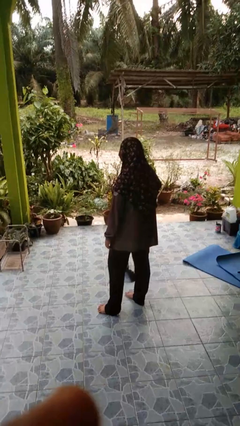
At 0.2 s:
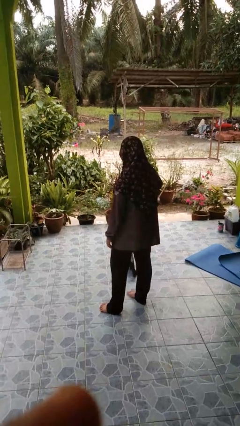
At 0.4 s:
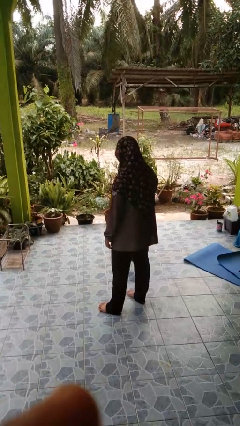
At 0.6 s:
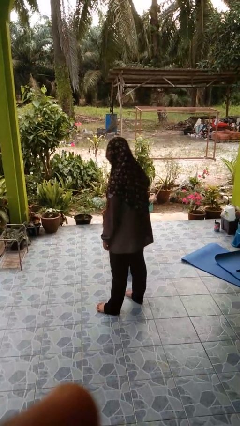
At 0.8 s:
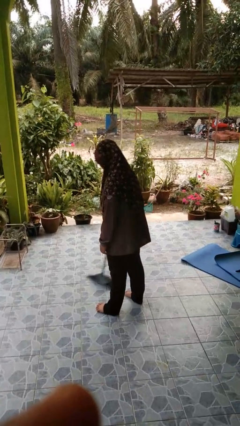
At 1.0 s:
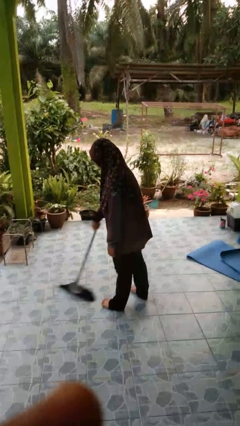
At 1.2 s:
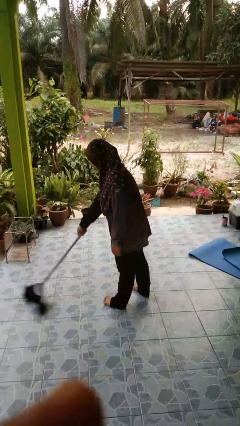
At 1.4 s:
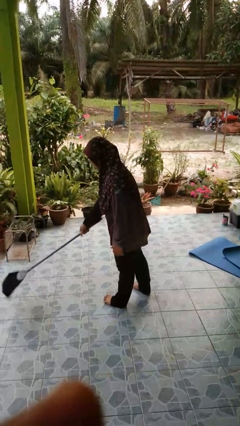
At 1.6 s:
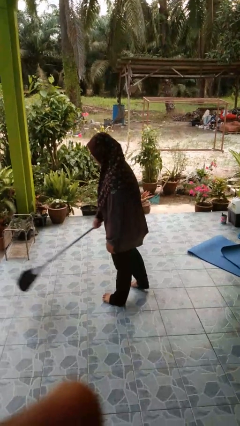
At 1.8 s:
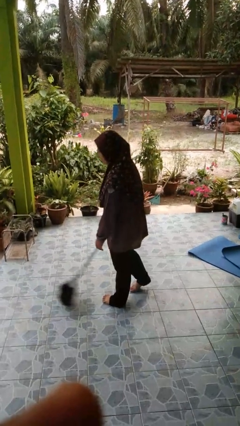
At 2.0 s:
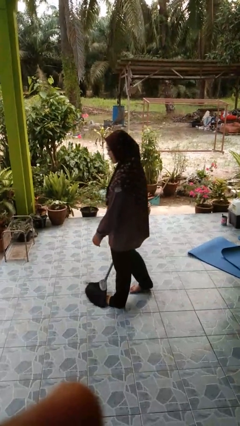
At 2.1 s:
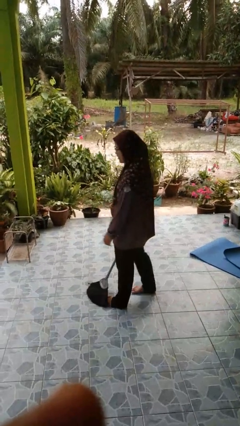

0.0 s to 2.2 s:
person sweeps floor

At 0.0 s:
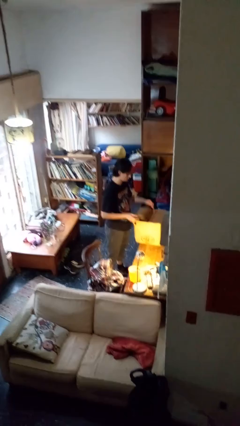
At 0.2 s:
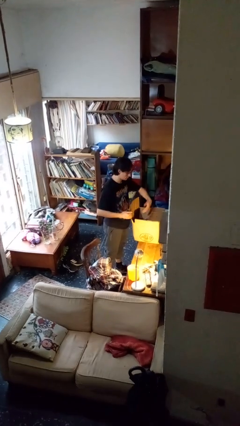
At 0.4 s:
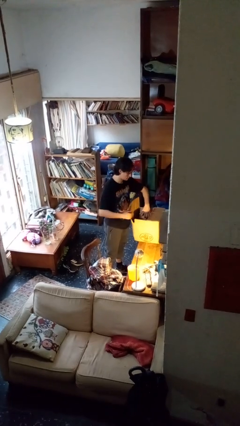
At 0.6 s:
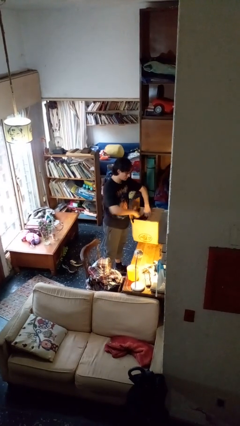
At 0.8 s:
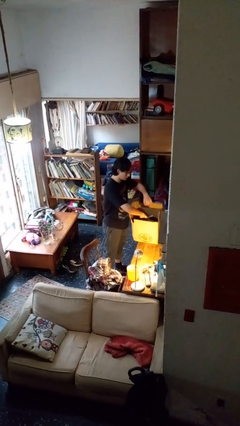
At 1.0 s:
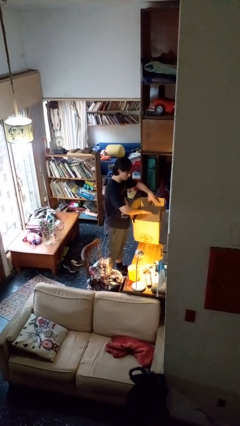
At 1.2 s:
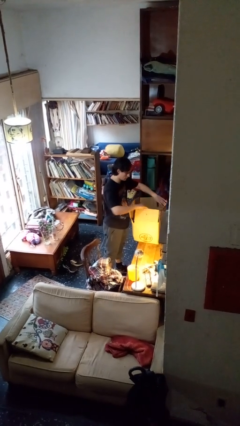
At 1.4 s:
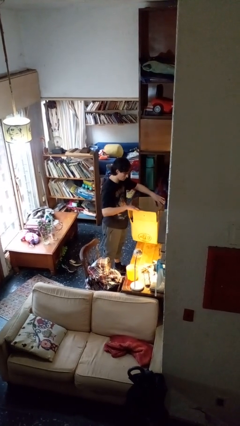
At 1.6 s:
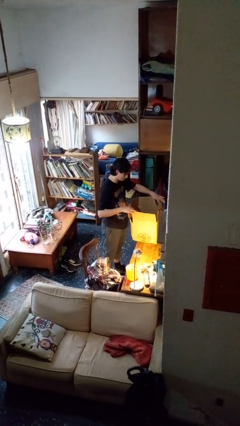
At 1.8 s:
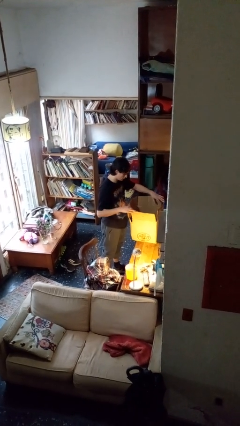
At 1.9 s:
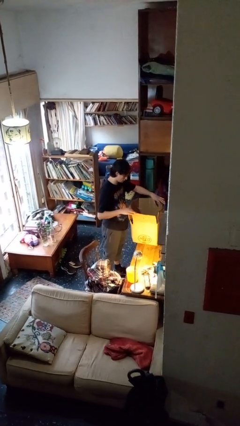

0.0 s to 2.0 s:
person opens box

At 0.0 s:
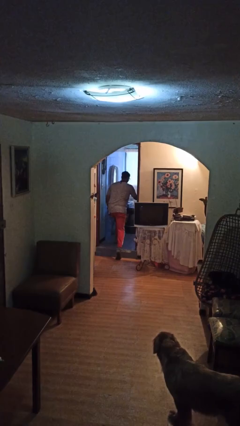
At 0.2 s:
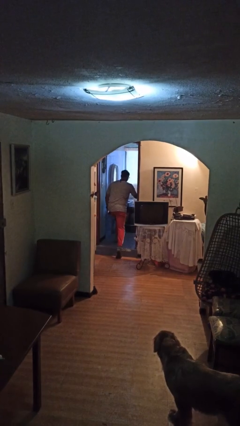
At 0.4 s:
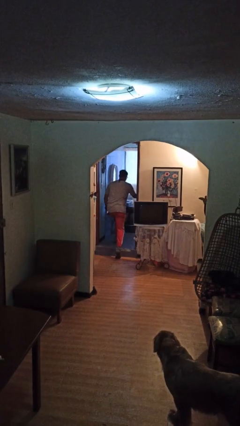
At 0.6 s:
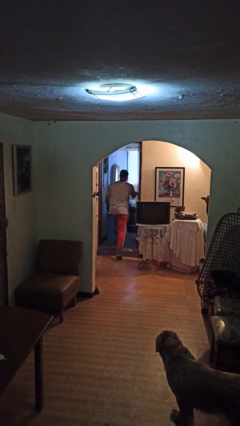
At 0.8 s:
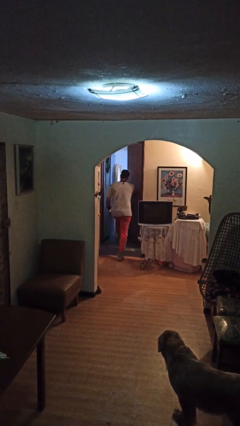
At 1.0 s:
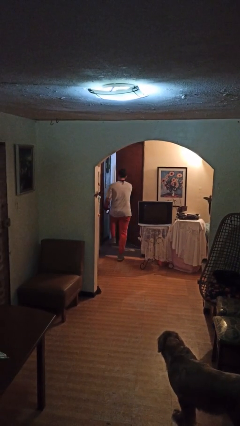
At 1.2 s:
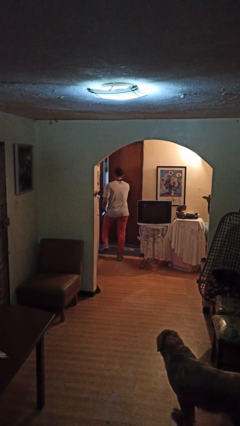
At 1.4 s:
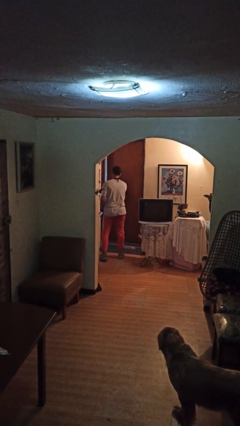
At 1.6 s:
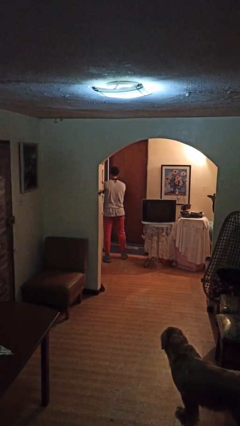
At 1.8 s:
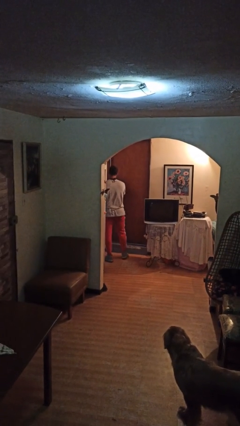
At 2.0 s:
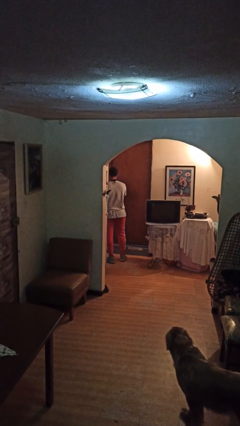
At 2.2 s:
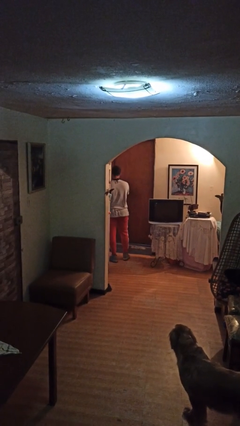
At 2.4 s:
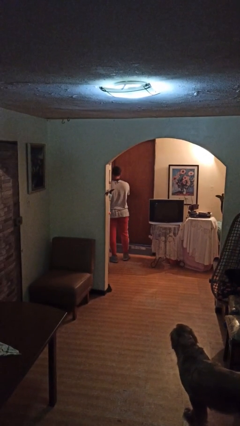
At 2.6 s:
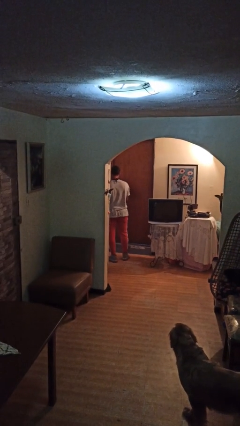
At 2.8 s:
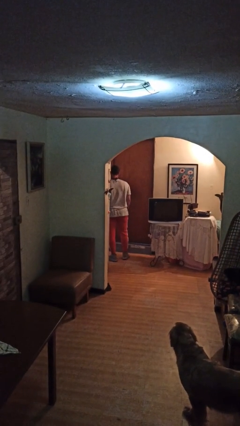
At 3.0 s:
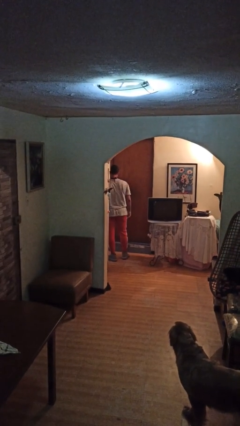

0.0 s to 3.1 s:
person closes facility door

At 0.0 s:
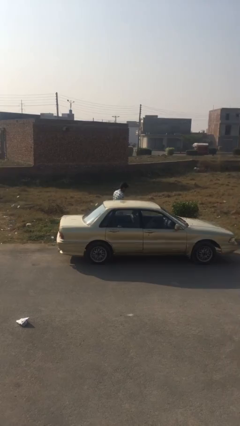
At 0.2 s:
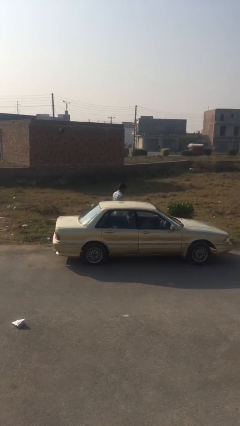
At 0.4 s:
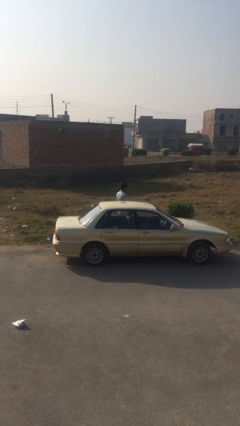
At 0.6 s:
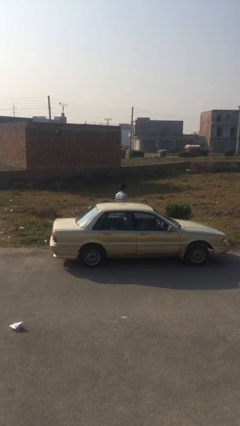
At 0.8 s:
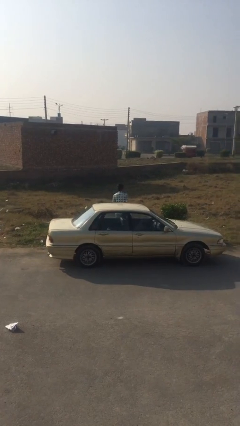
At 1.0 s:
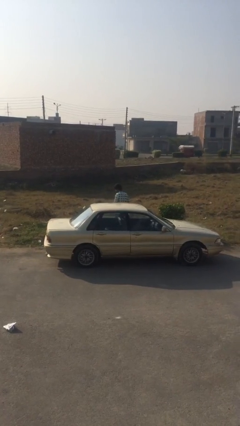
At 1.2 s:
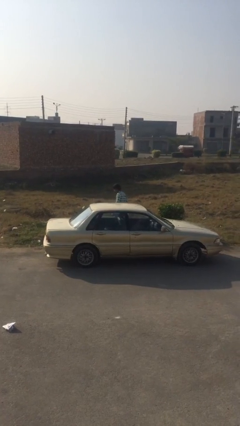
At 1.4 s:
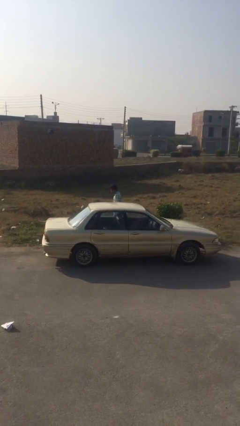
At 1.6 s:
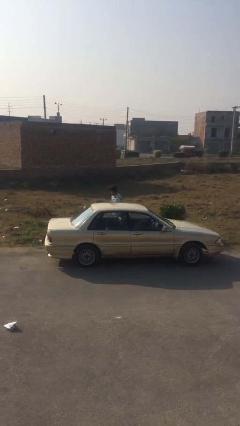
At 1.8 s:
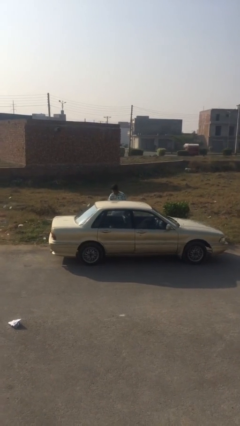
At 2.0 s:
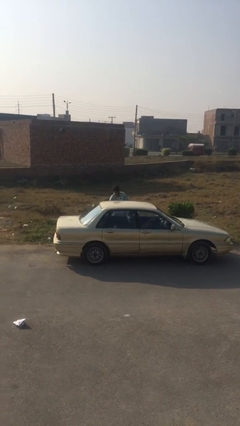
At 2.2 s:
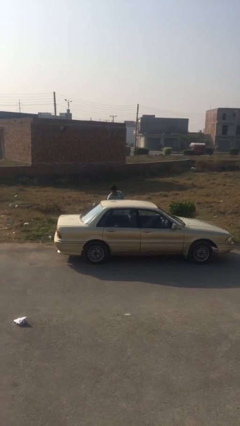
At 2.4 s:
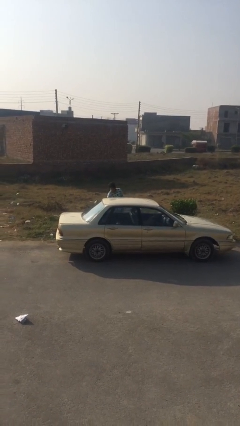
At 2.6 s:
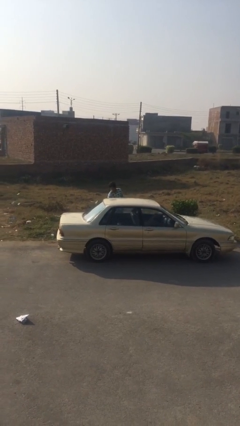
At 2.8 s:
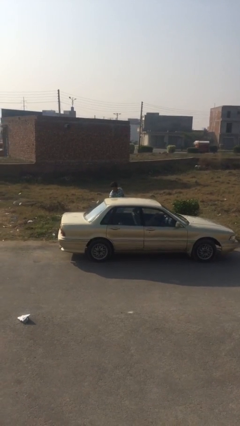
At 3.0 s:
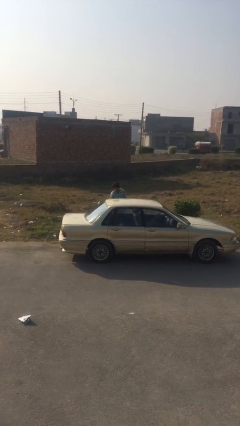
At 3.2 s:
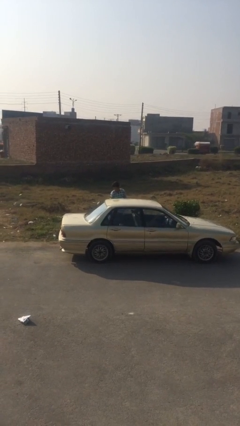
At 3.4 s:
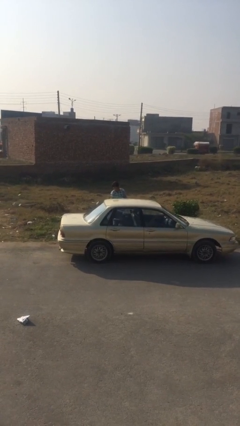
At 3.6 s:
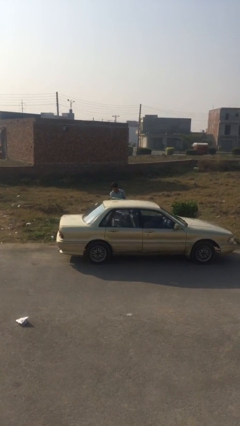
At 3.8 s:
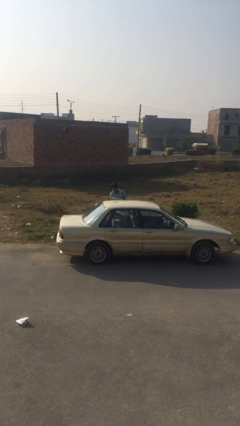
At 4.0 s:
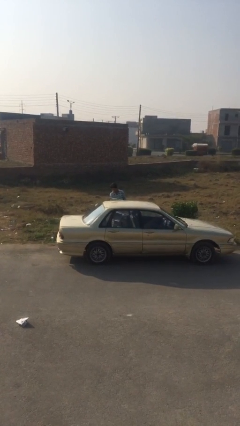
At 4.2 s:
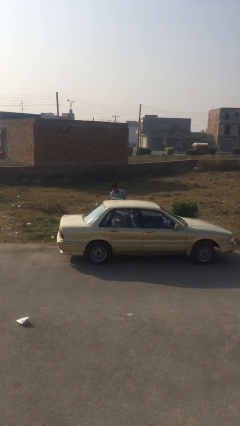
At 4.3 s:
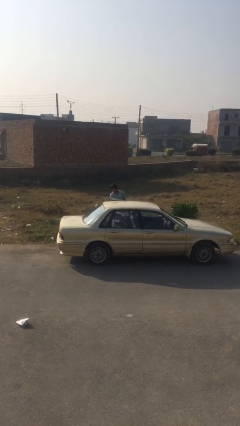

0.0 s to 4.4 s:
person opens car door

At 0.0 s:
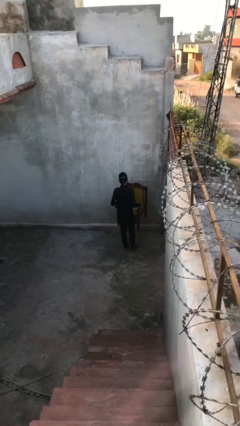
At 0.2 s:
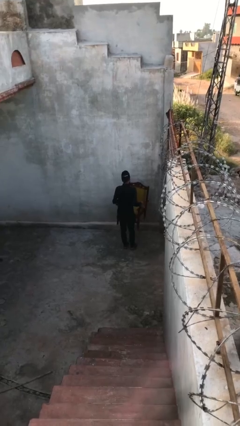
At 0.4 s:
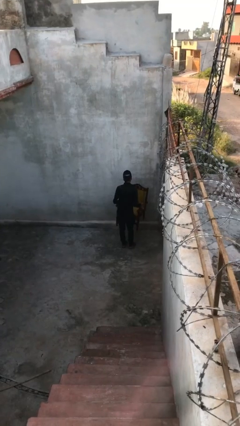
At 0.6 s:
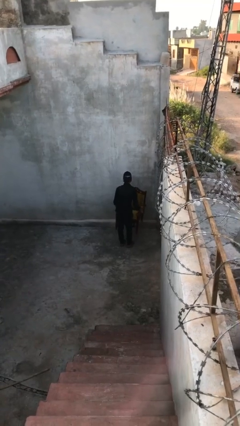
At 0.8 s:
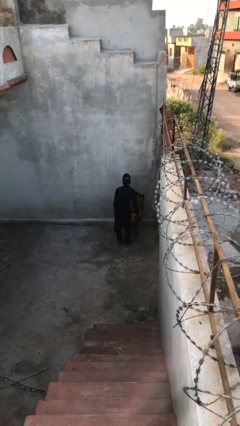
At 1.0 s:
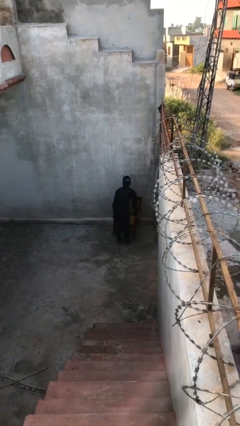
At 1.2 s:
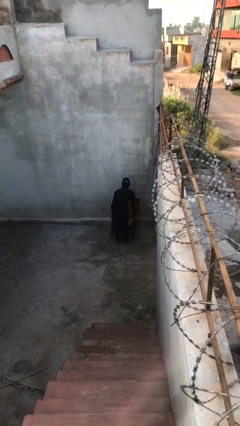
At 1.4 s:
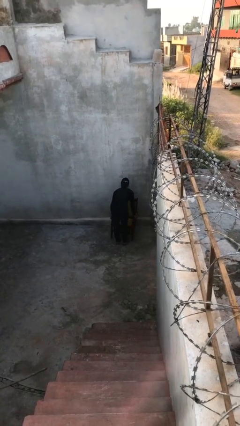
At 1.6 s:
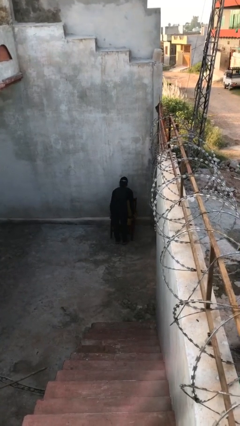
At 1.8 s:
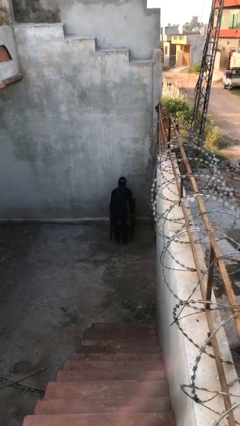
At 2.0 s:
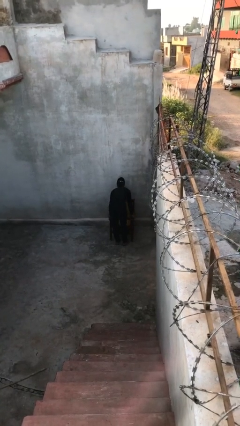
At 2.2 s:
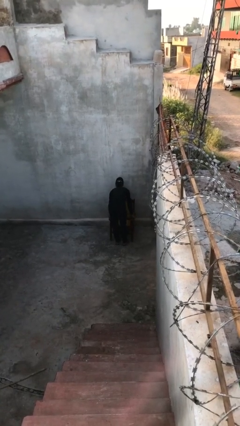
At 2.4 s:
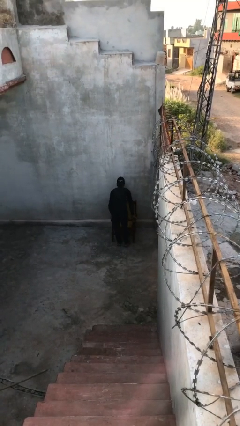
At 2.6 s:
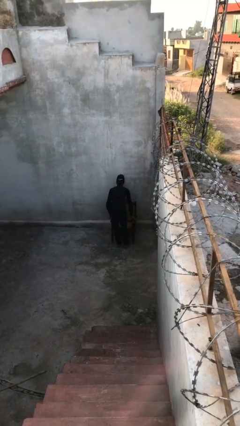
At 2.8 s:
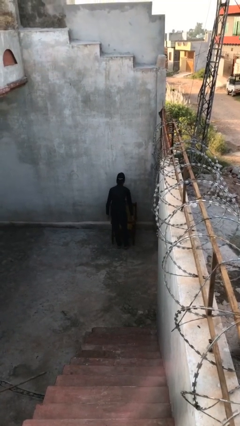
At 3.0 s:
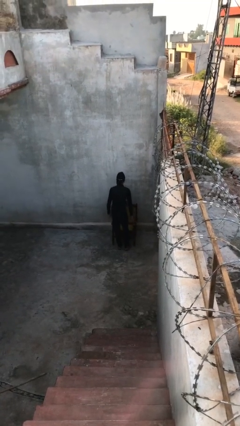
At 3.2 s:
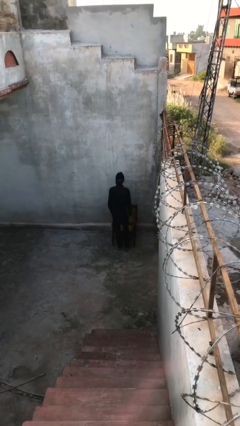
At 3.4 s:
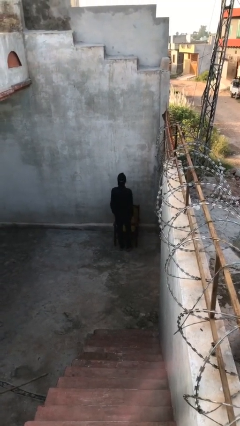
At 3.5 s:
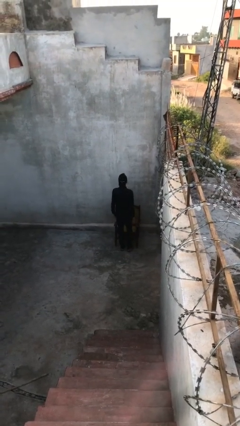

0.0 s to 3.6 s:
person puts down object on floor

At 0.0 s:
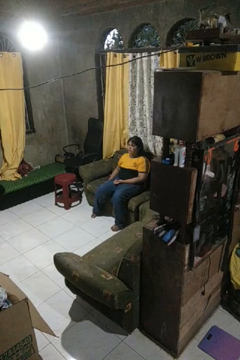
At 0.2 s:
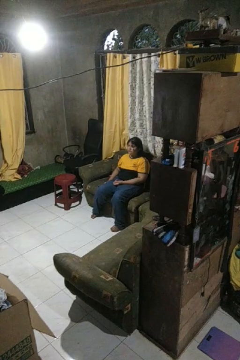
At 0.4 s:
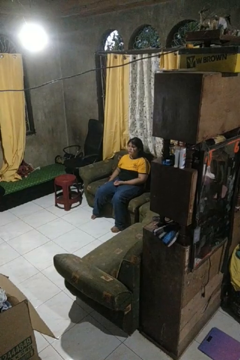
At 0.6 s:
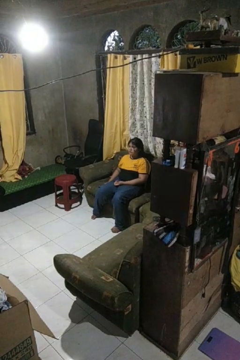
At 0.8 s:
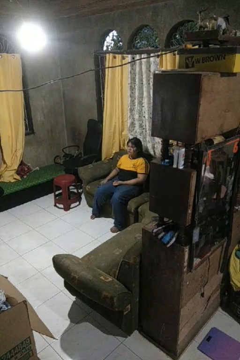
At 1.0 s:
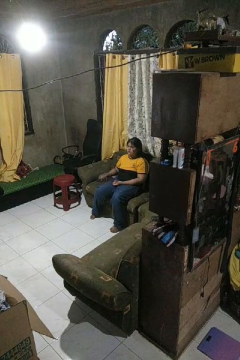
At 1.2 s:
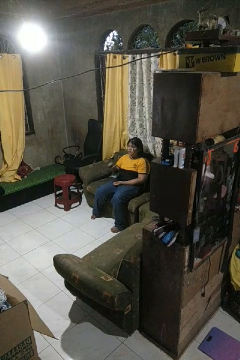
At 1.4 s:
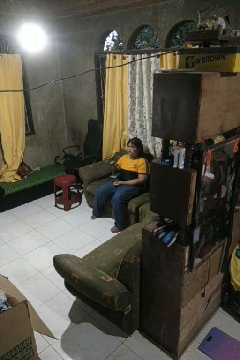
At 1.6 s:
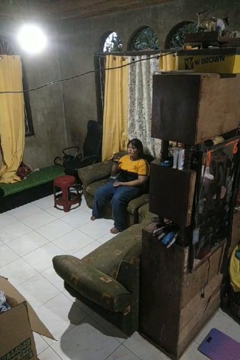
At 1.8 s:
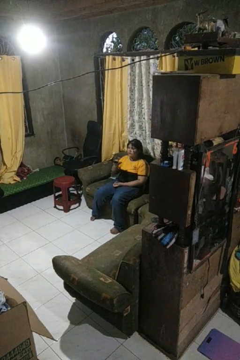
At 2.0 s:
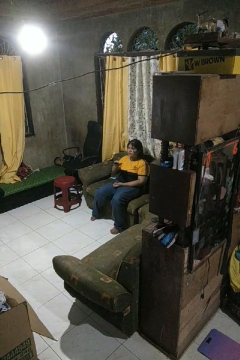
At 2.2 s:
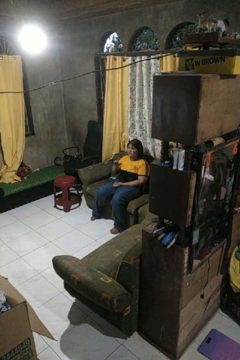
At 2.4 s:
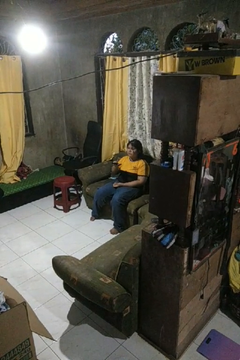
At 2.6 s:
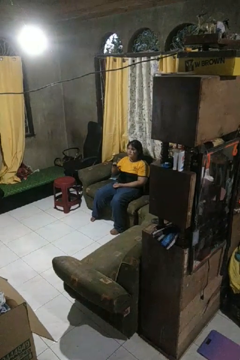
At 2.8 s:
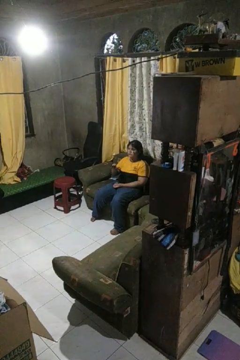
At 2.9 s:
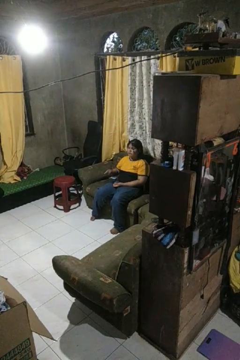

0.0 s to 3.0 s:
person uses television remote
